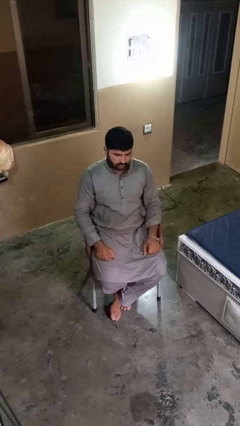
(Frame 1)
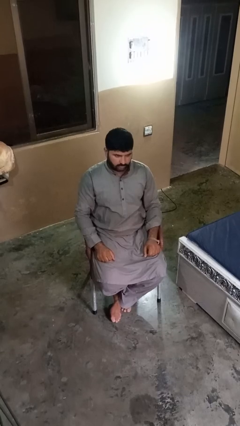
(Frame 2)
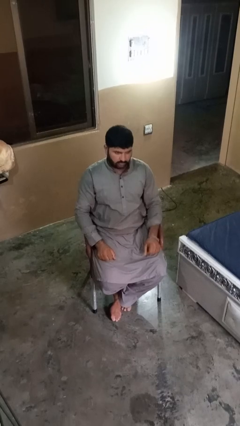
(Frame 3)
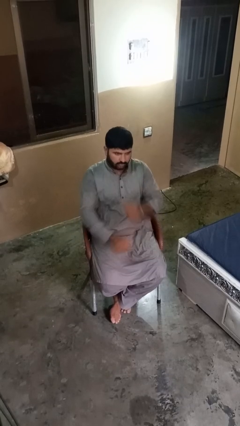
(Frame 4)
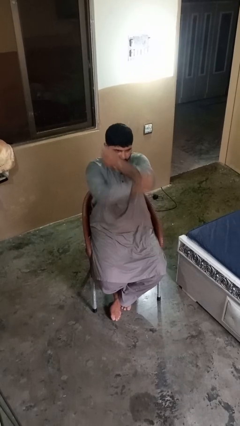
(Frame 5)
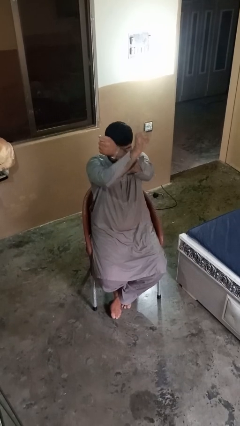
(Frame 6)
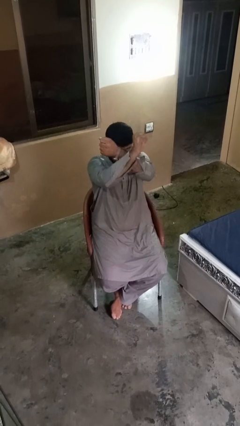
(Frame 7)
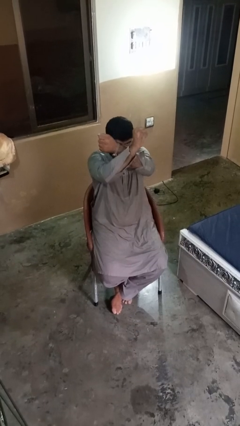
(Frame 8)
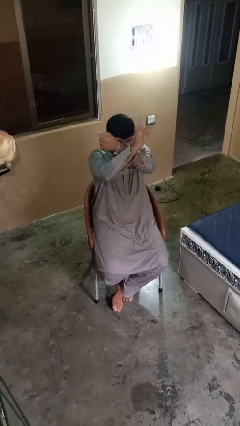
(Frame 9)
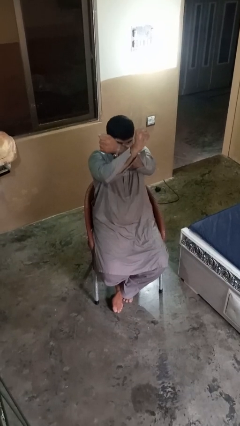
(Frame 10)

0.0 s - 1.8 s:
person gestures arms x

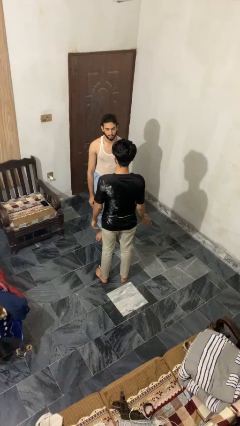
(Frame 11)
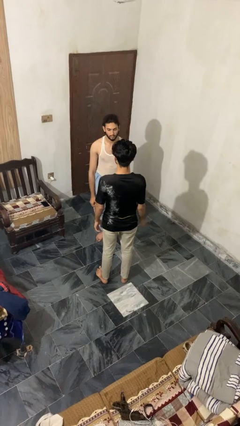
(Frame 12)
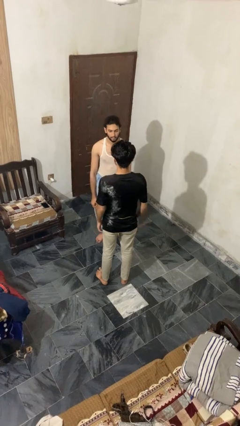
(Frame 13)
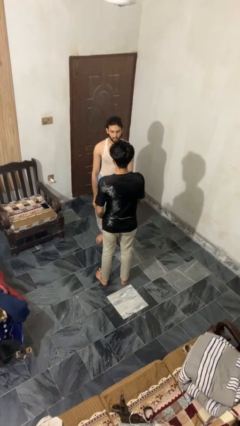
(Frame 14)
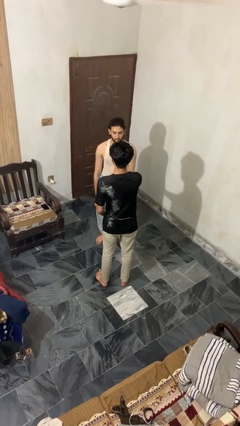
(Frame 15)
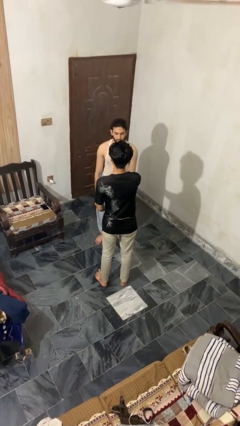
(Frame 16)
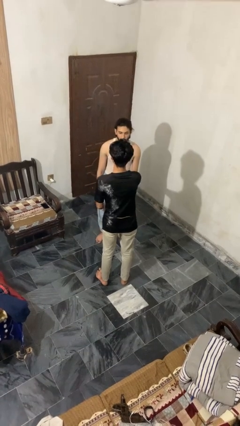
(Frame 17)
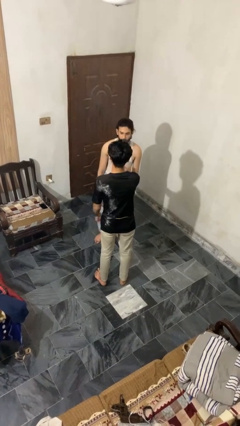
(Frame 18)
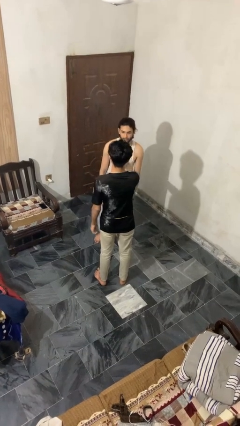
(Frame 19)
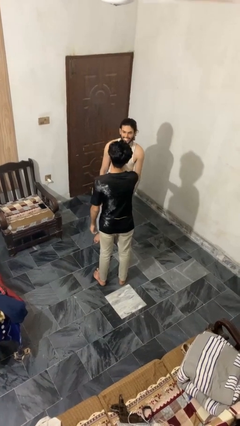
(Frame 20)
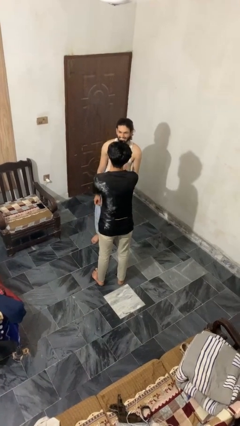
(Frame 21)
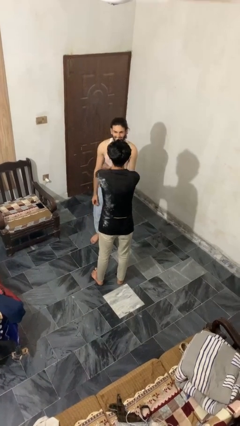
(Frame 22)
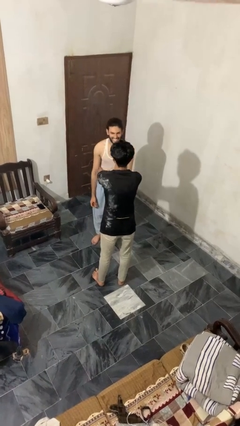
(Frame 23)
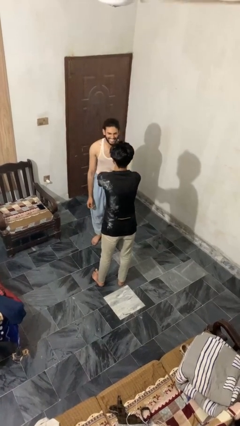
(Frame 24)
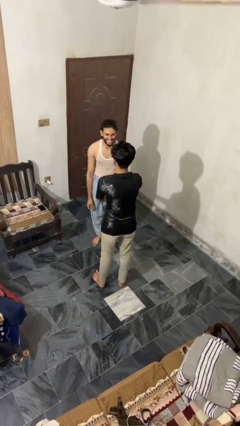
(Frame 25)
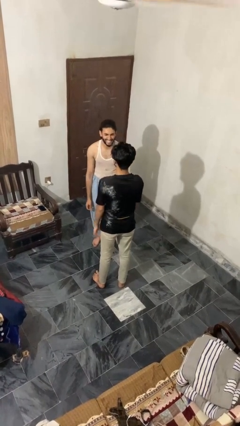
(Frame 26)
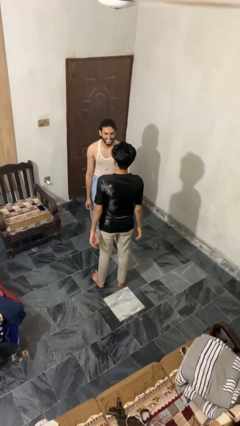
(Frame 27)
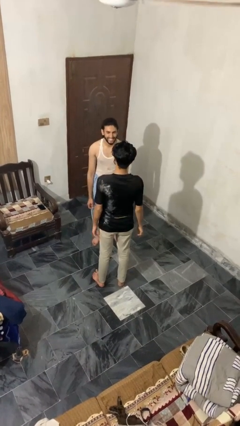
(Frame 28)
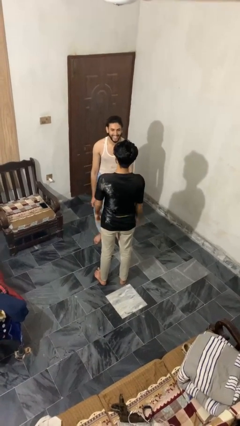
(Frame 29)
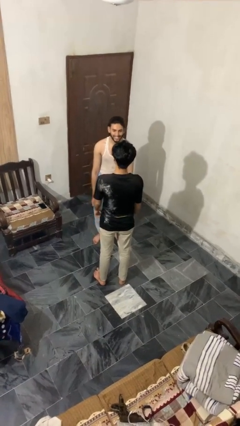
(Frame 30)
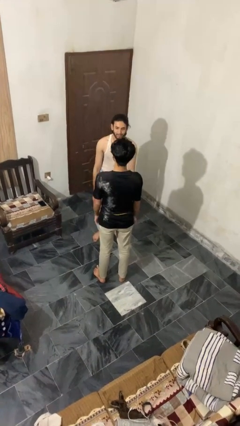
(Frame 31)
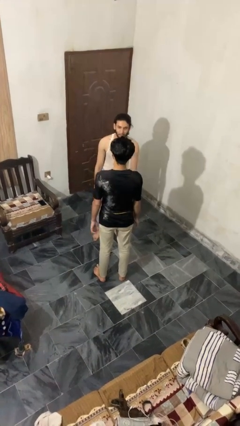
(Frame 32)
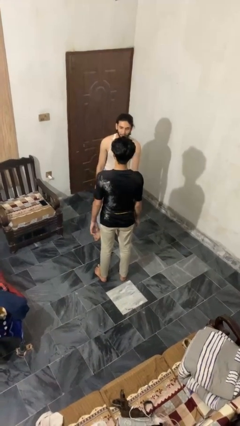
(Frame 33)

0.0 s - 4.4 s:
person tickles person

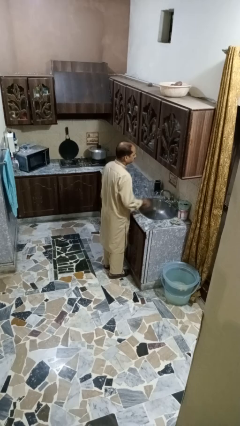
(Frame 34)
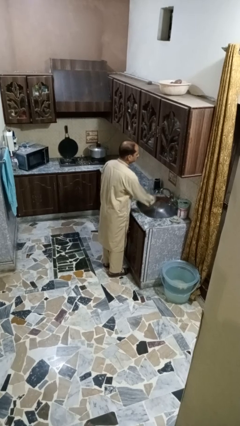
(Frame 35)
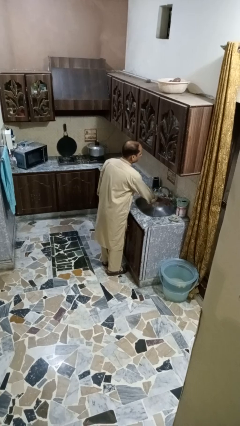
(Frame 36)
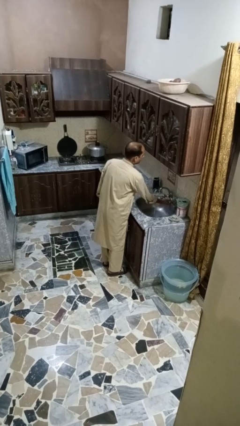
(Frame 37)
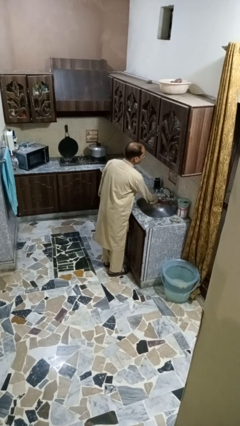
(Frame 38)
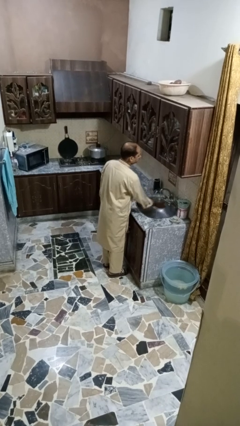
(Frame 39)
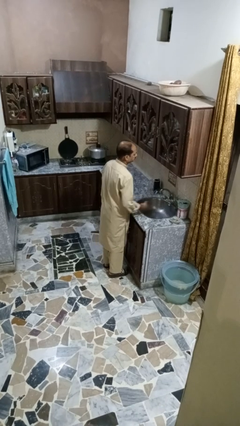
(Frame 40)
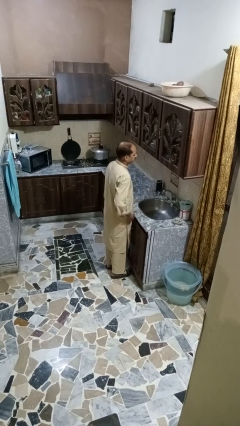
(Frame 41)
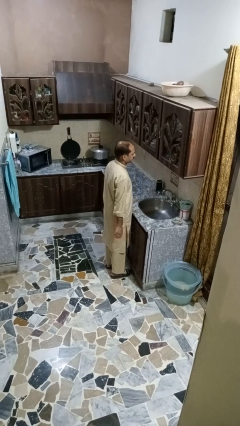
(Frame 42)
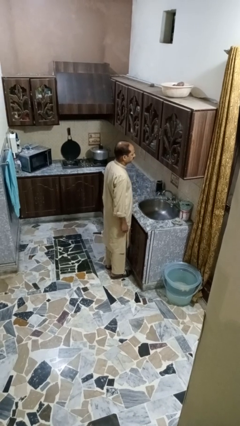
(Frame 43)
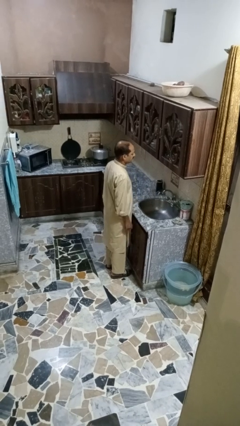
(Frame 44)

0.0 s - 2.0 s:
person turns off faucet

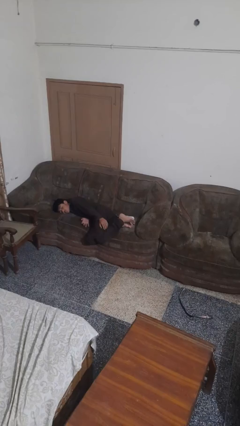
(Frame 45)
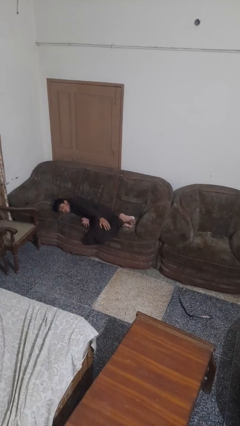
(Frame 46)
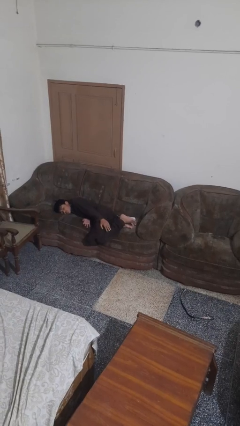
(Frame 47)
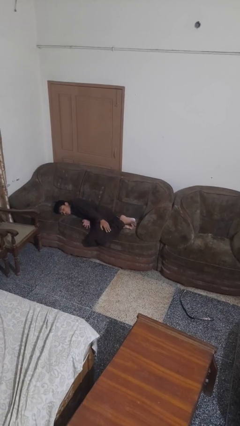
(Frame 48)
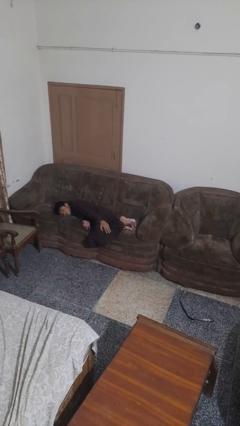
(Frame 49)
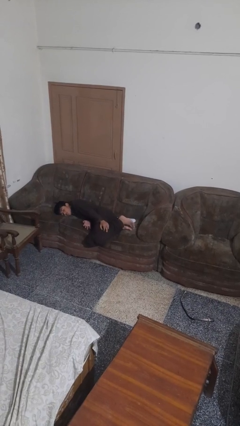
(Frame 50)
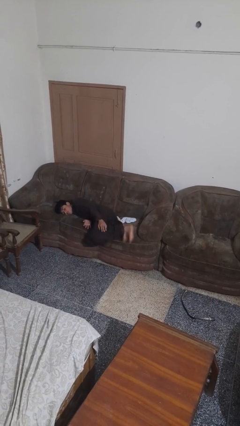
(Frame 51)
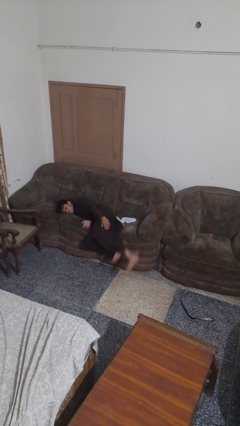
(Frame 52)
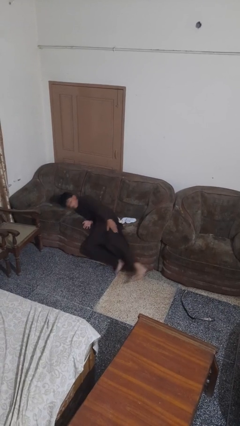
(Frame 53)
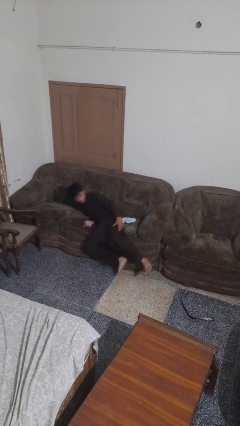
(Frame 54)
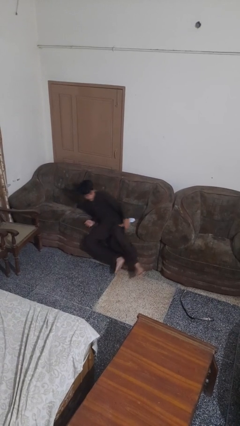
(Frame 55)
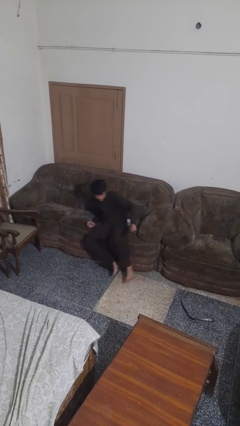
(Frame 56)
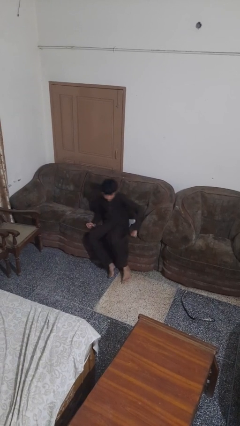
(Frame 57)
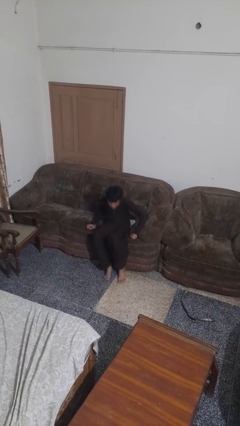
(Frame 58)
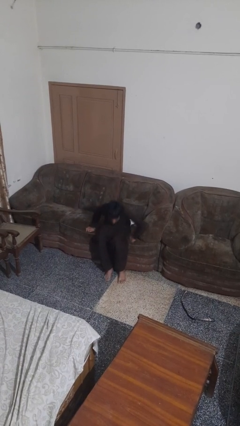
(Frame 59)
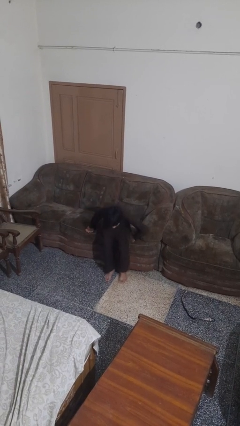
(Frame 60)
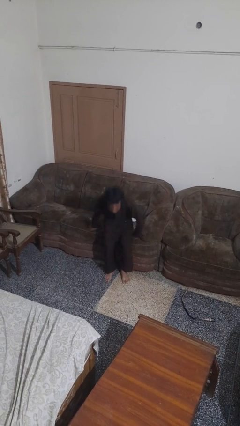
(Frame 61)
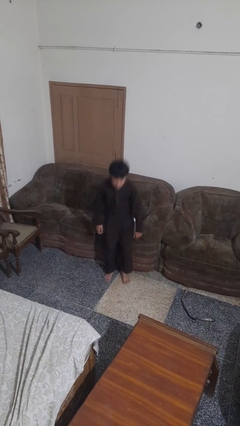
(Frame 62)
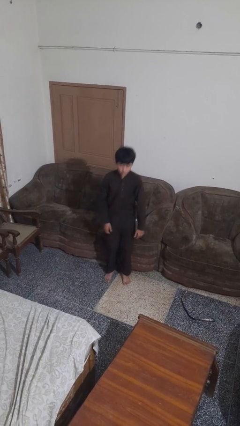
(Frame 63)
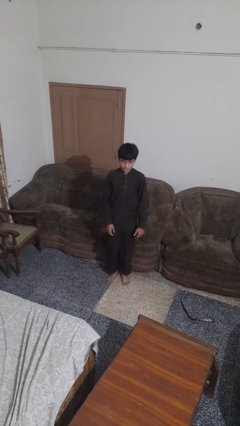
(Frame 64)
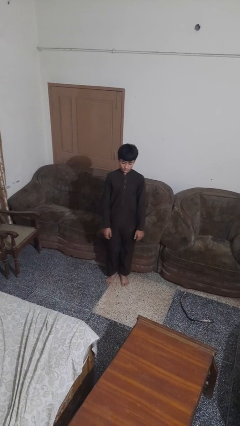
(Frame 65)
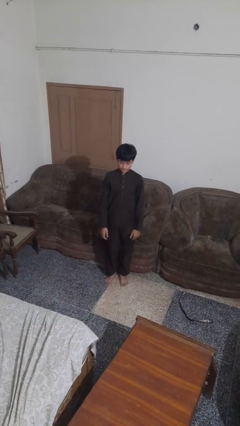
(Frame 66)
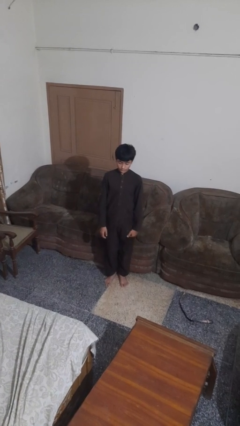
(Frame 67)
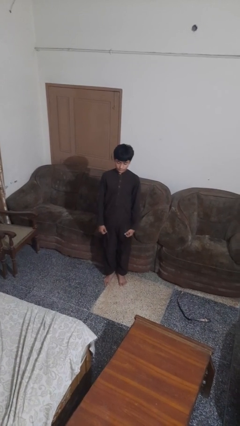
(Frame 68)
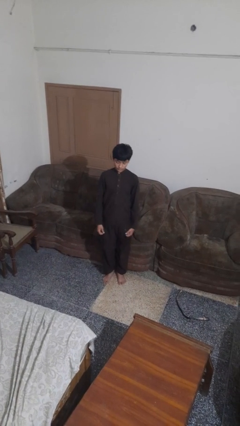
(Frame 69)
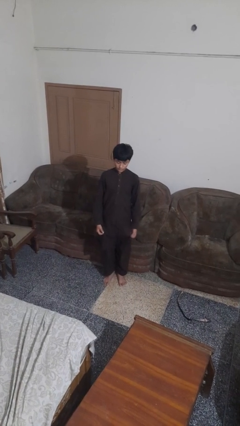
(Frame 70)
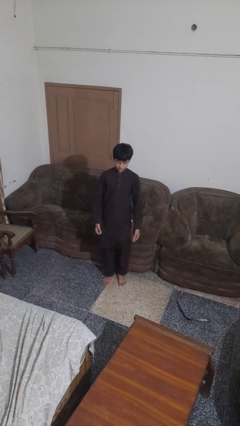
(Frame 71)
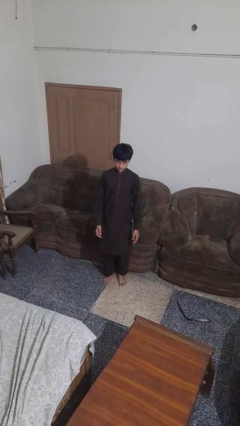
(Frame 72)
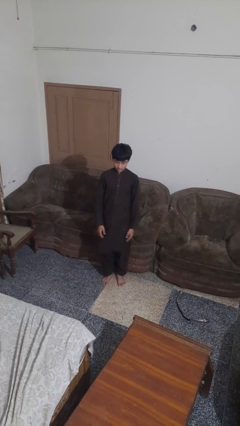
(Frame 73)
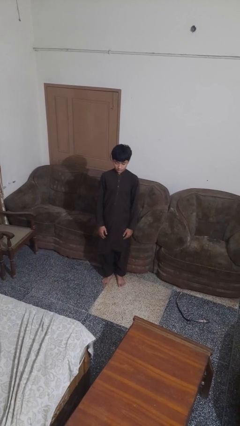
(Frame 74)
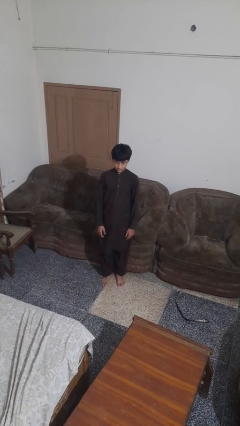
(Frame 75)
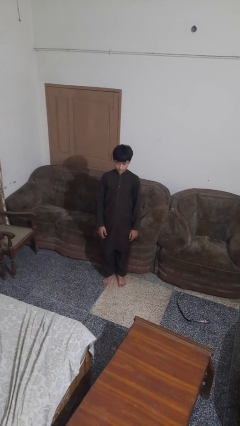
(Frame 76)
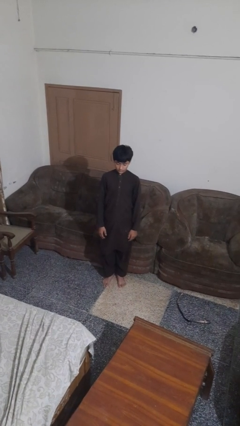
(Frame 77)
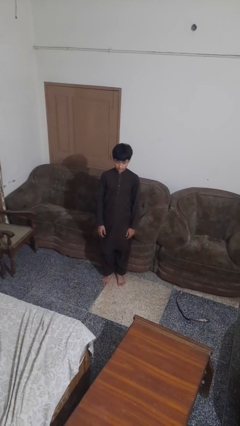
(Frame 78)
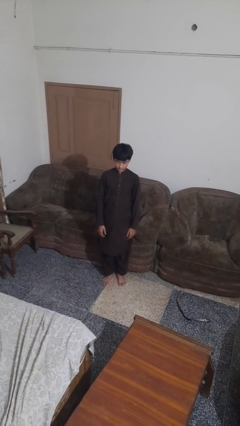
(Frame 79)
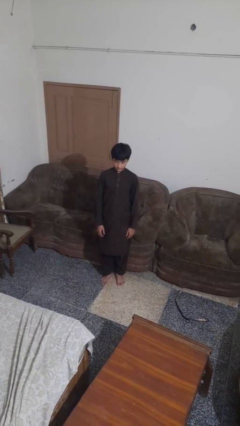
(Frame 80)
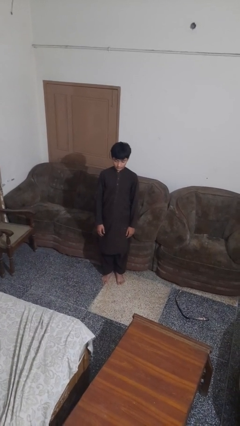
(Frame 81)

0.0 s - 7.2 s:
person stands up

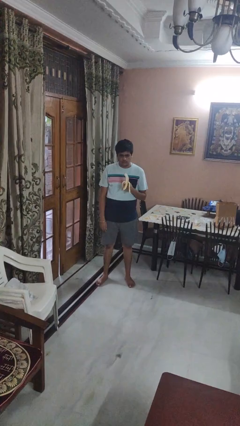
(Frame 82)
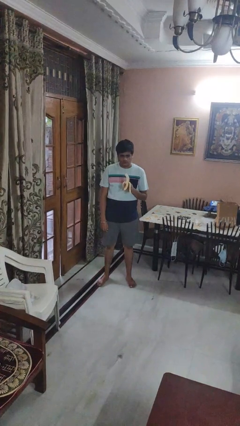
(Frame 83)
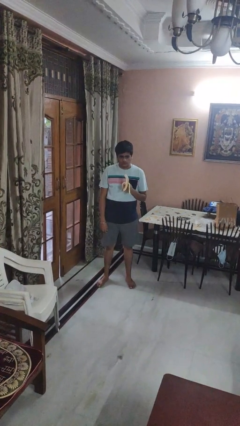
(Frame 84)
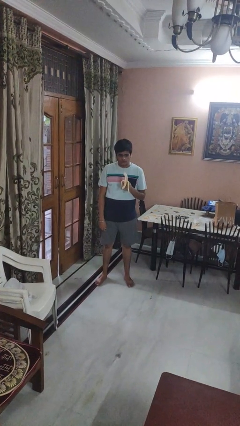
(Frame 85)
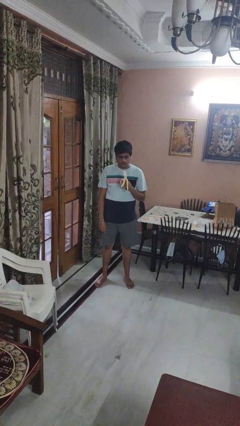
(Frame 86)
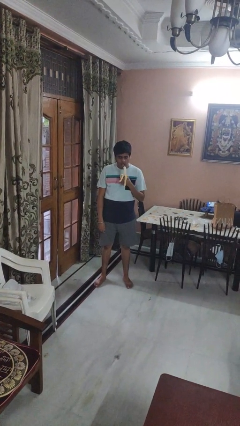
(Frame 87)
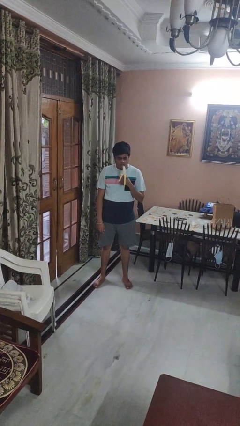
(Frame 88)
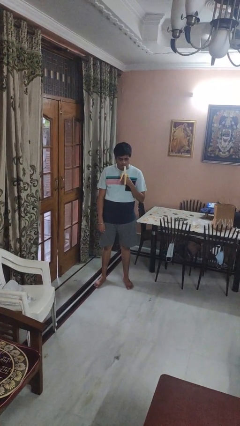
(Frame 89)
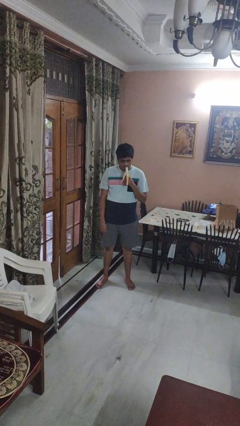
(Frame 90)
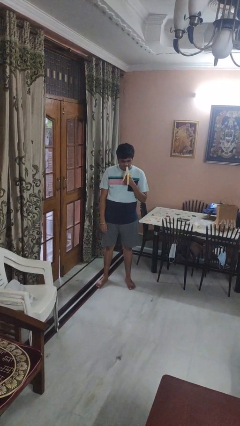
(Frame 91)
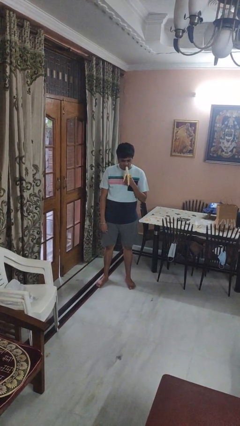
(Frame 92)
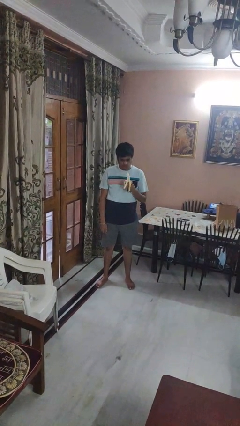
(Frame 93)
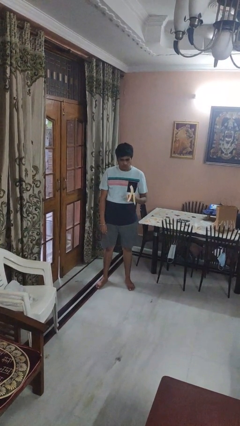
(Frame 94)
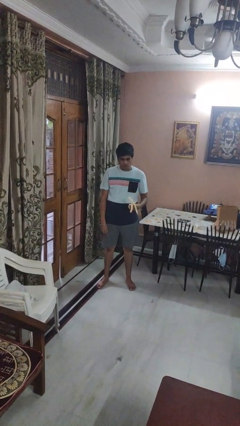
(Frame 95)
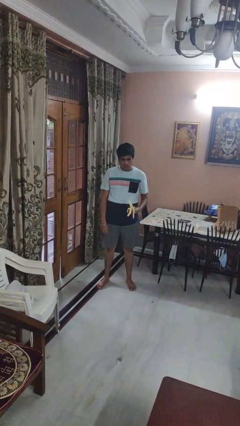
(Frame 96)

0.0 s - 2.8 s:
person eats banana
